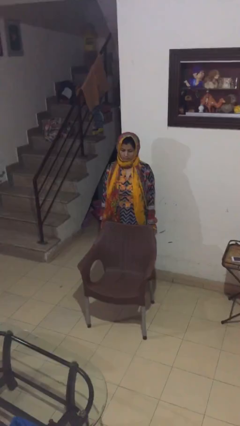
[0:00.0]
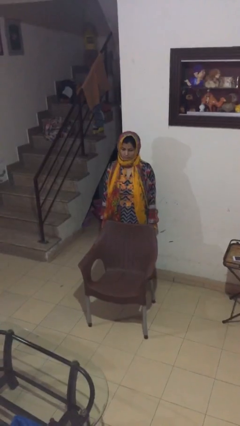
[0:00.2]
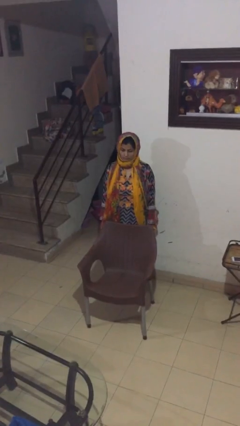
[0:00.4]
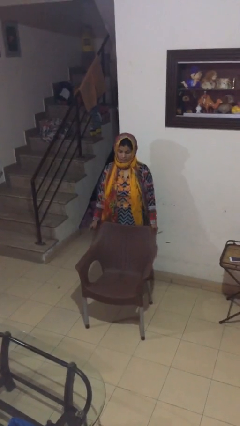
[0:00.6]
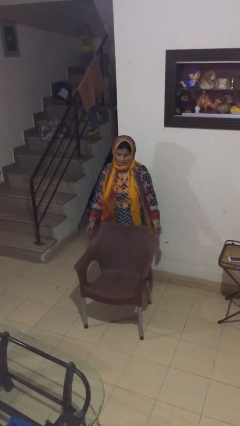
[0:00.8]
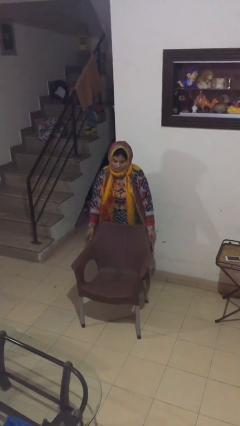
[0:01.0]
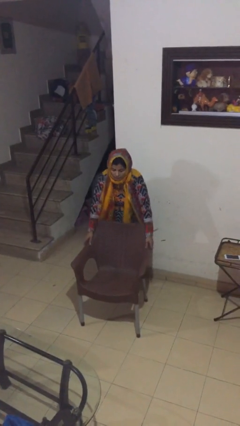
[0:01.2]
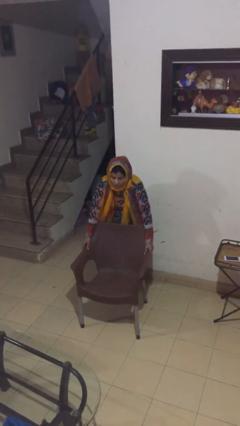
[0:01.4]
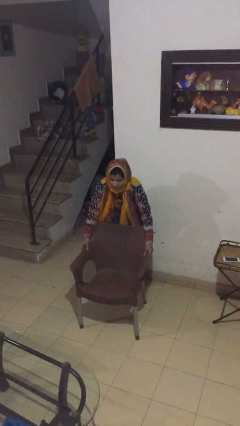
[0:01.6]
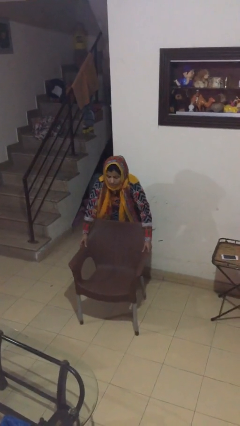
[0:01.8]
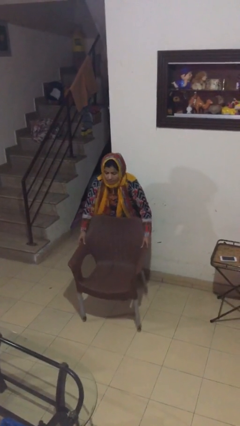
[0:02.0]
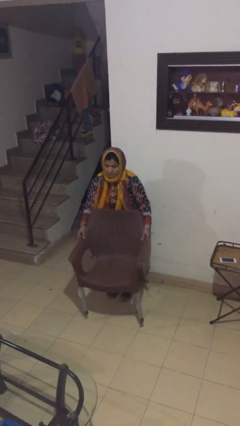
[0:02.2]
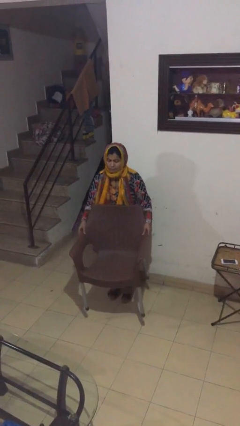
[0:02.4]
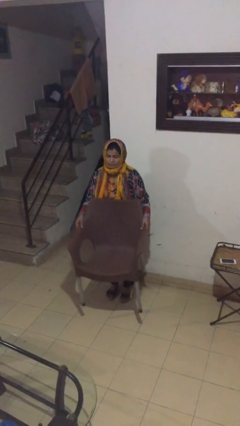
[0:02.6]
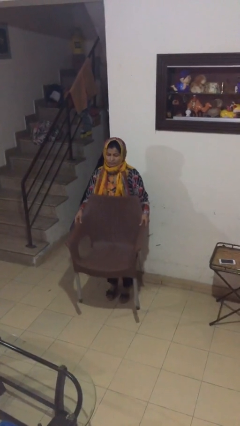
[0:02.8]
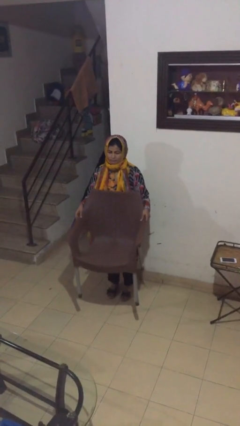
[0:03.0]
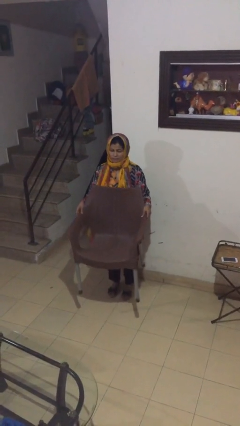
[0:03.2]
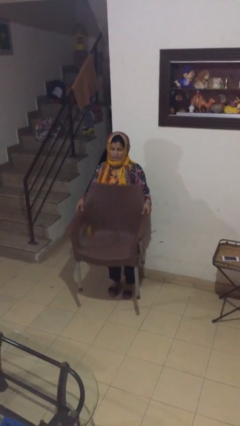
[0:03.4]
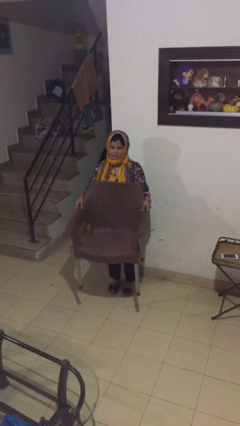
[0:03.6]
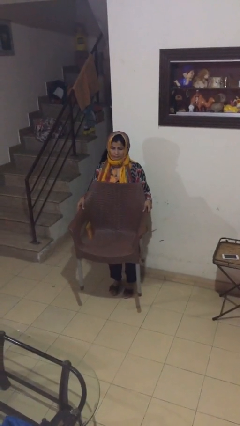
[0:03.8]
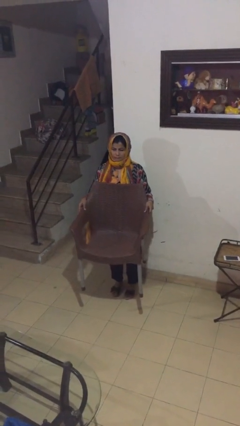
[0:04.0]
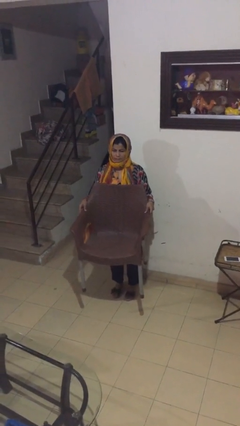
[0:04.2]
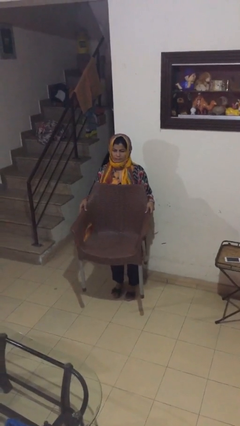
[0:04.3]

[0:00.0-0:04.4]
person carries heavy object

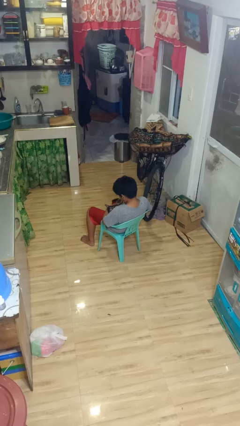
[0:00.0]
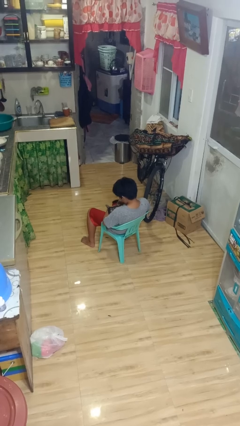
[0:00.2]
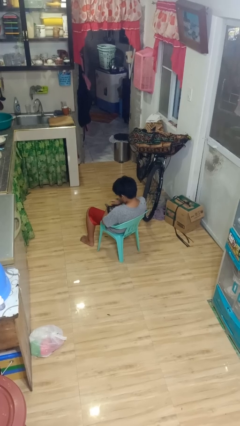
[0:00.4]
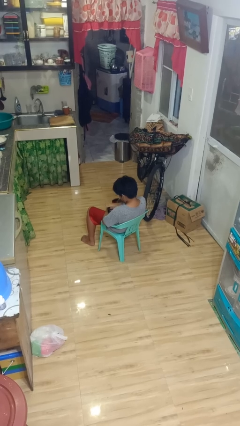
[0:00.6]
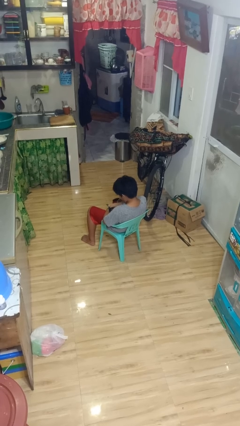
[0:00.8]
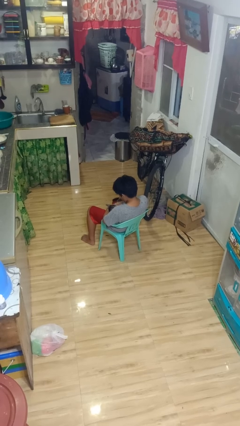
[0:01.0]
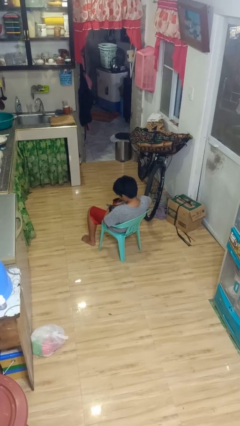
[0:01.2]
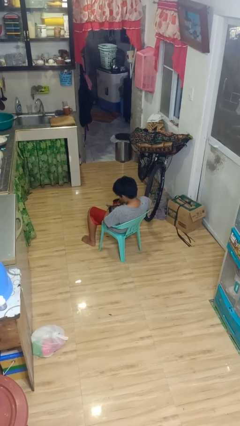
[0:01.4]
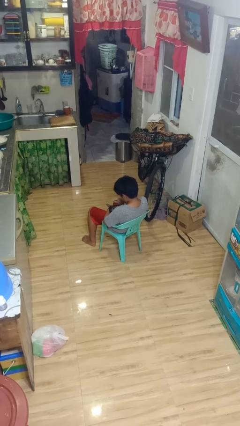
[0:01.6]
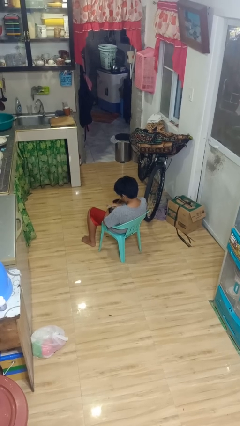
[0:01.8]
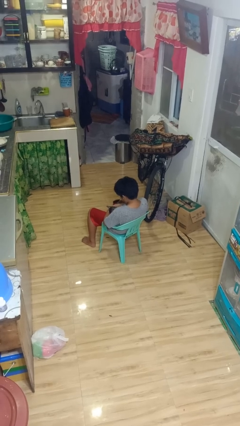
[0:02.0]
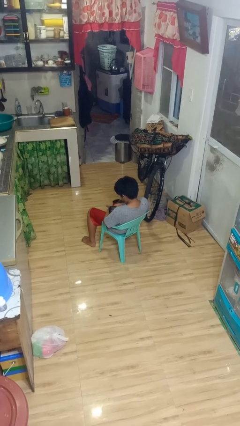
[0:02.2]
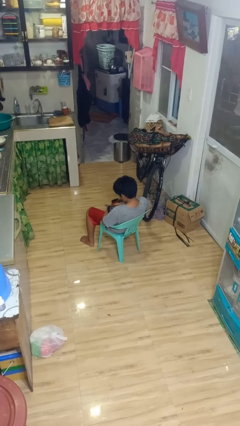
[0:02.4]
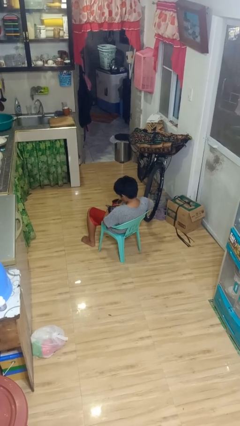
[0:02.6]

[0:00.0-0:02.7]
person pets cat

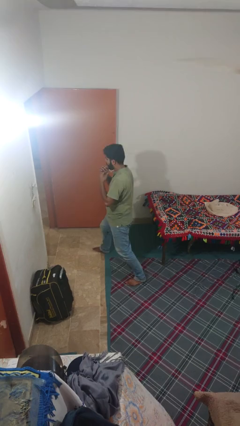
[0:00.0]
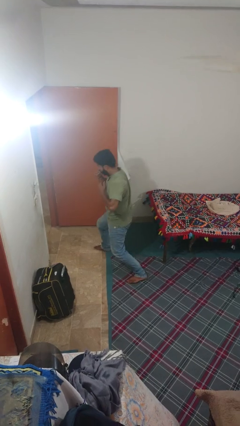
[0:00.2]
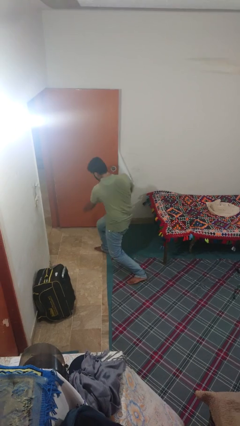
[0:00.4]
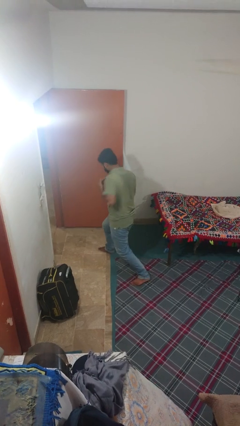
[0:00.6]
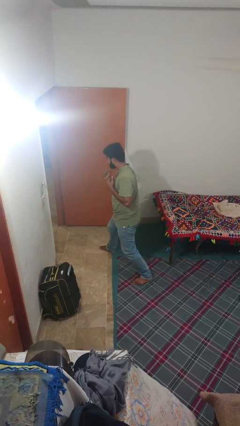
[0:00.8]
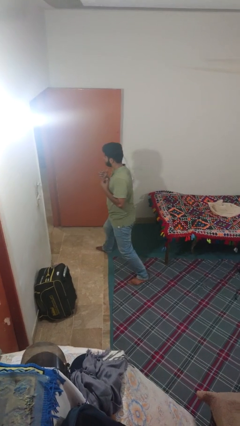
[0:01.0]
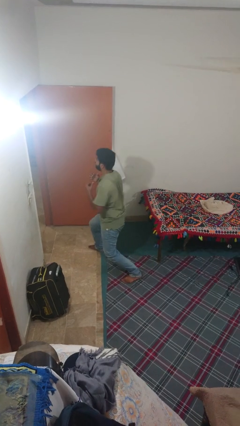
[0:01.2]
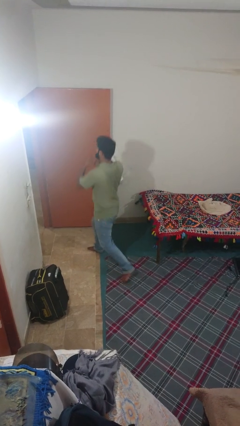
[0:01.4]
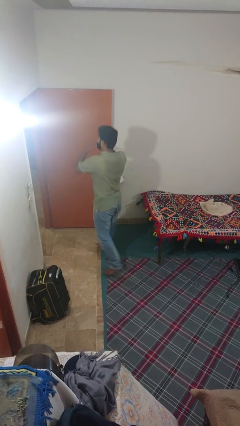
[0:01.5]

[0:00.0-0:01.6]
person karate chop

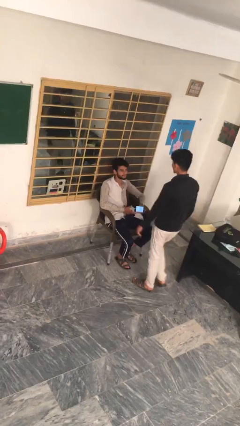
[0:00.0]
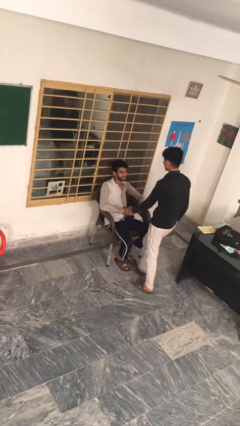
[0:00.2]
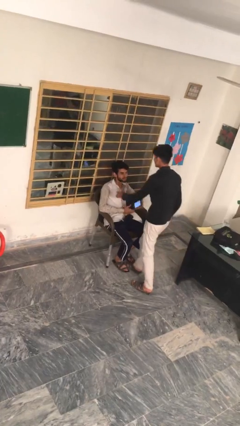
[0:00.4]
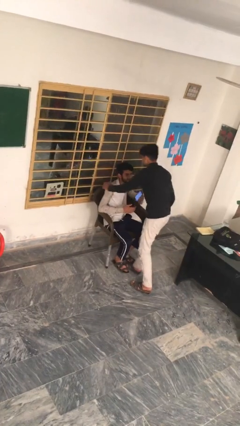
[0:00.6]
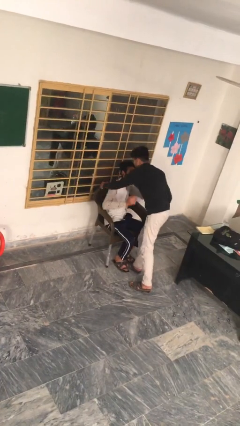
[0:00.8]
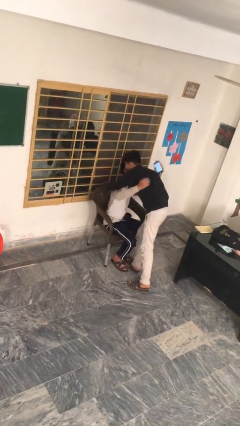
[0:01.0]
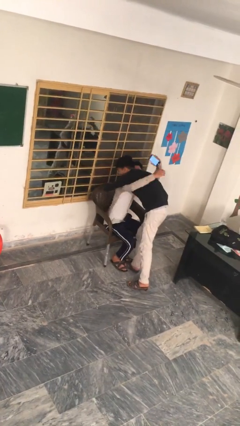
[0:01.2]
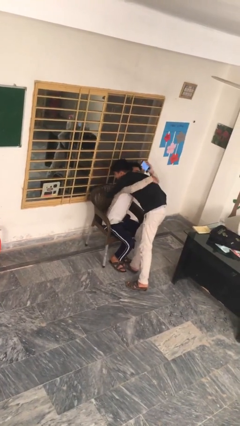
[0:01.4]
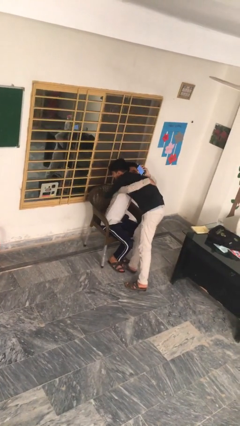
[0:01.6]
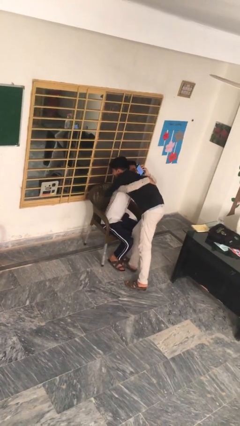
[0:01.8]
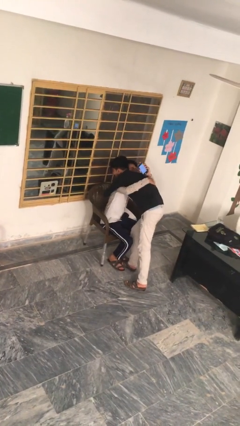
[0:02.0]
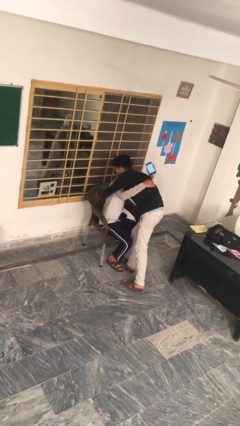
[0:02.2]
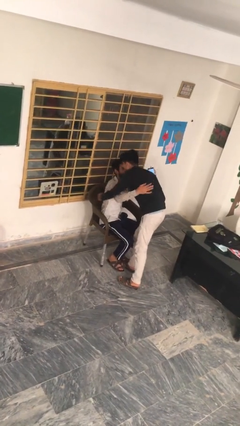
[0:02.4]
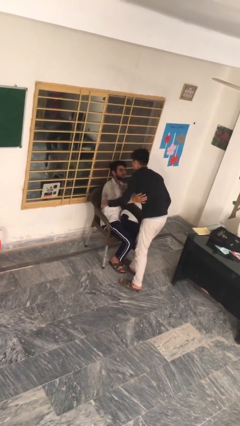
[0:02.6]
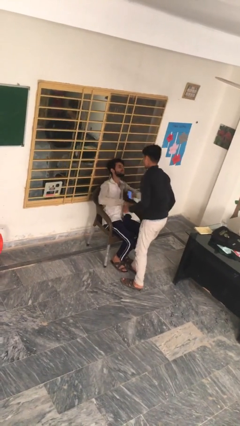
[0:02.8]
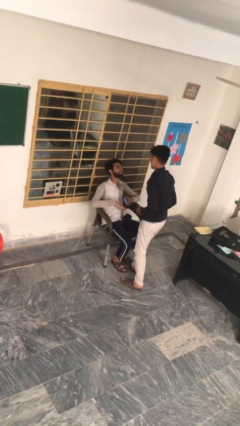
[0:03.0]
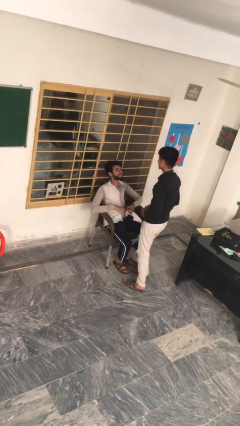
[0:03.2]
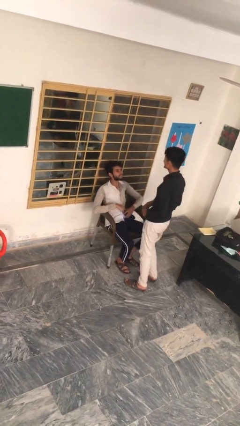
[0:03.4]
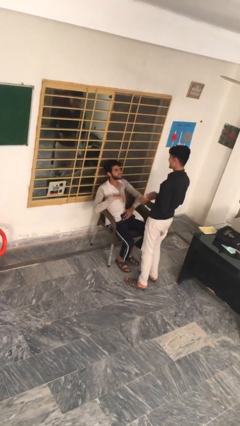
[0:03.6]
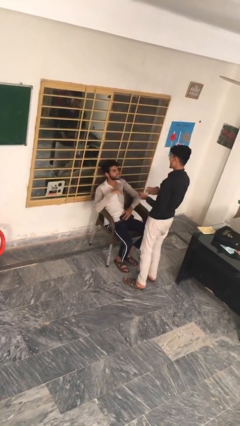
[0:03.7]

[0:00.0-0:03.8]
person embraces person

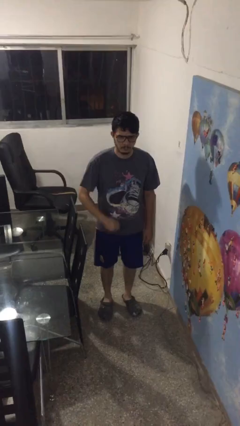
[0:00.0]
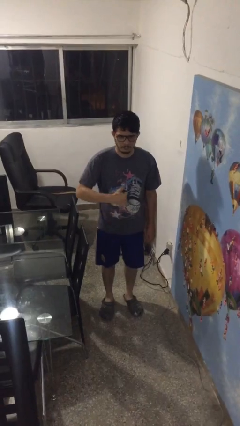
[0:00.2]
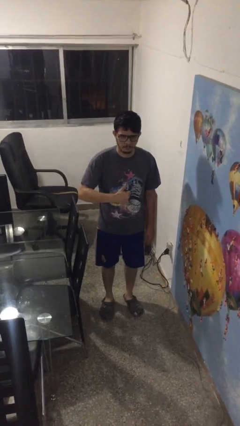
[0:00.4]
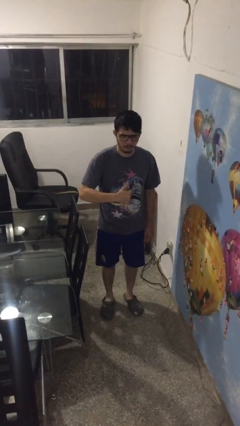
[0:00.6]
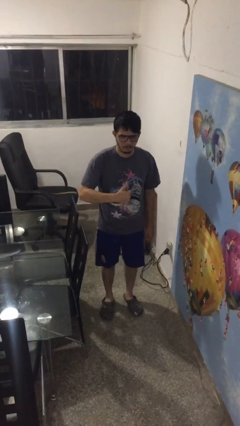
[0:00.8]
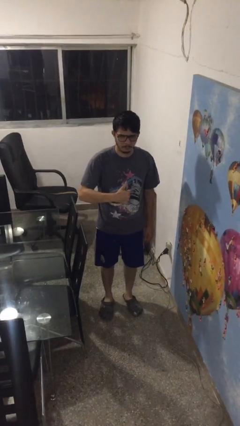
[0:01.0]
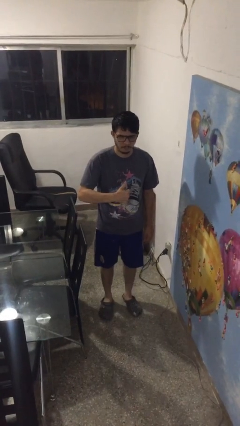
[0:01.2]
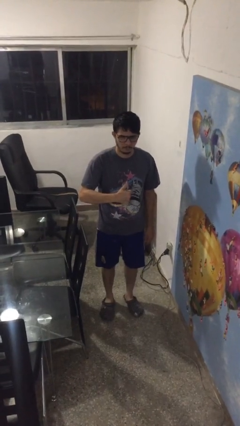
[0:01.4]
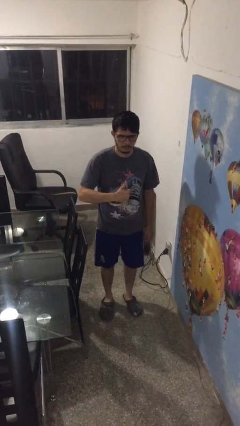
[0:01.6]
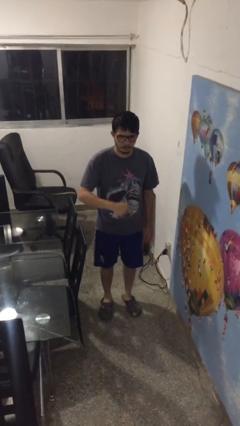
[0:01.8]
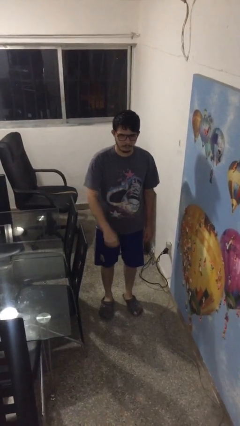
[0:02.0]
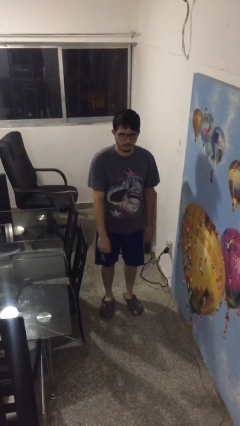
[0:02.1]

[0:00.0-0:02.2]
person gestures thumbs up

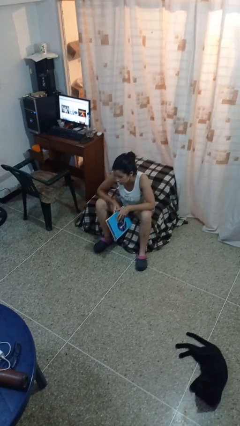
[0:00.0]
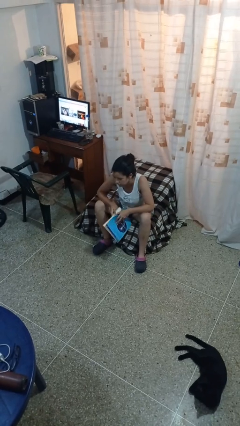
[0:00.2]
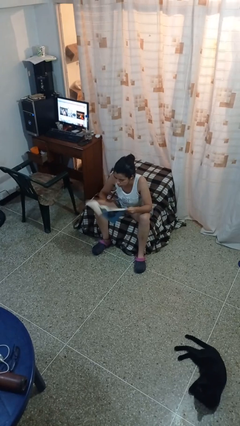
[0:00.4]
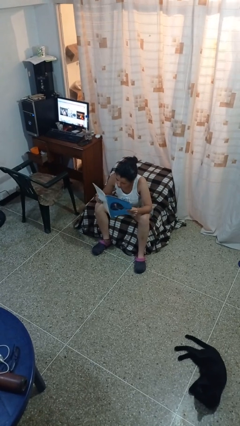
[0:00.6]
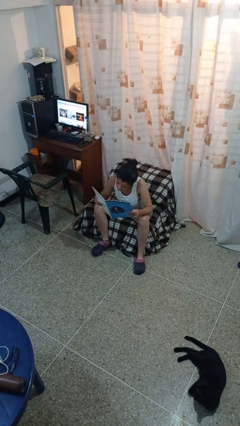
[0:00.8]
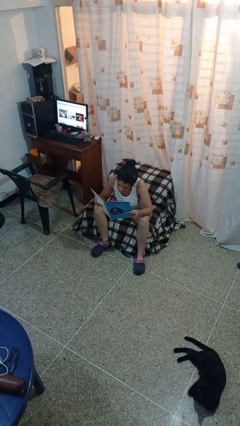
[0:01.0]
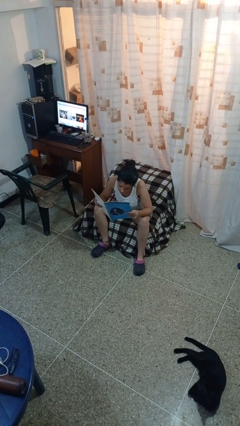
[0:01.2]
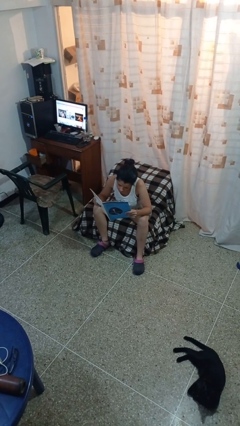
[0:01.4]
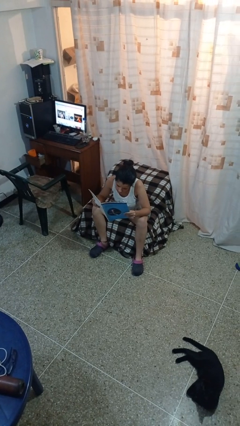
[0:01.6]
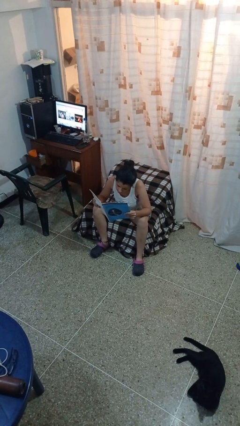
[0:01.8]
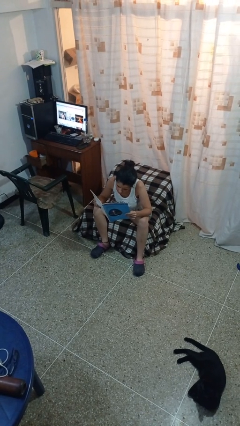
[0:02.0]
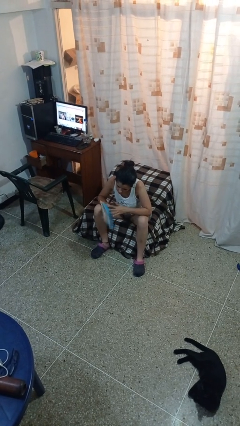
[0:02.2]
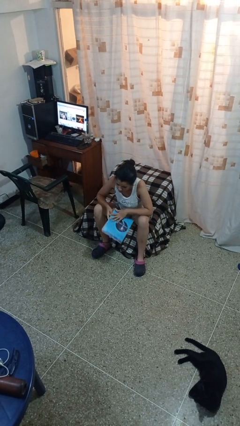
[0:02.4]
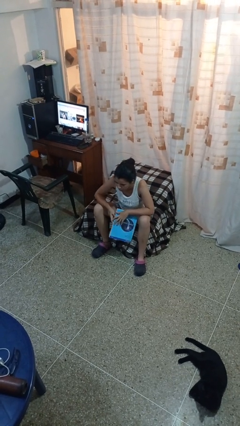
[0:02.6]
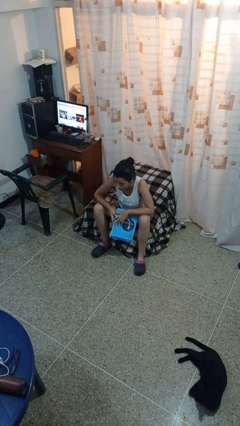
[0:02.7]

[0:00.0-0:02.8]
person reads magazine
